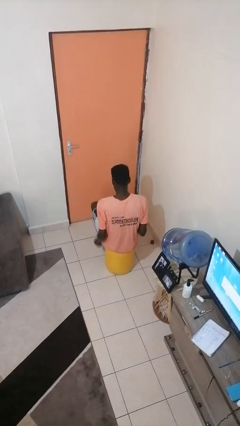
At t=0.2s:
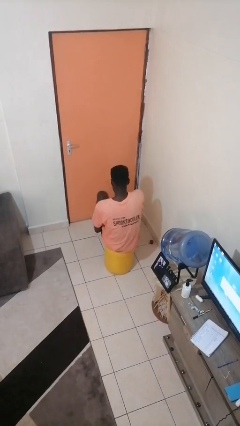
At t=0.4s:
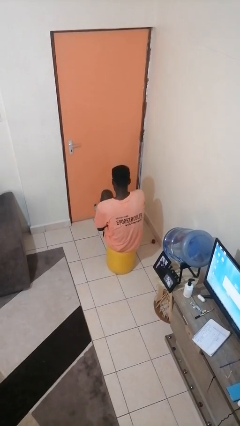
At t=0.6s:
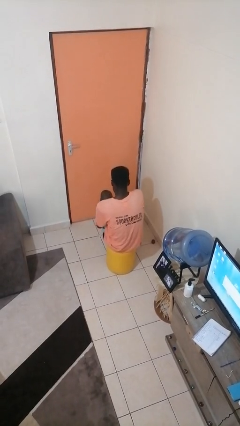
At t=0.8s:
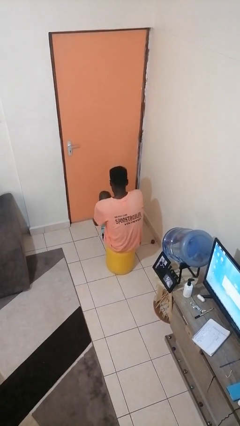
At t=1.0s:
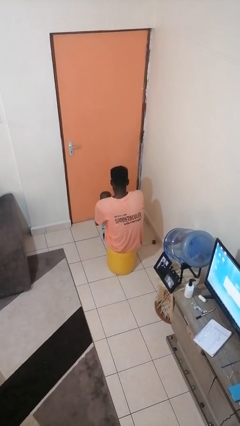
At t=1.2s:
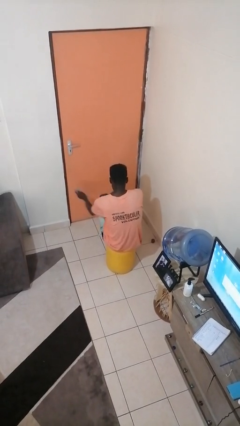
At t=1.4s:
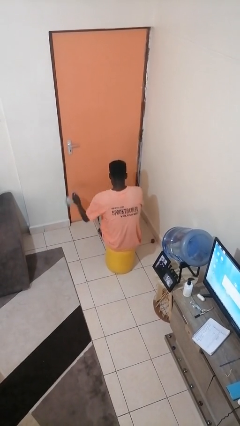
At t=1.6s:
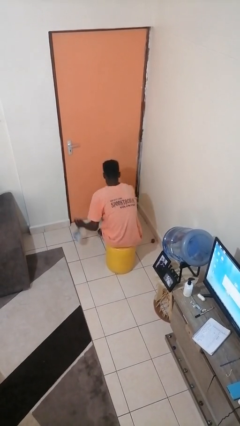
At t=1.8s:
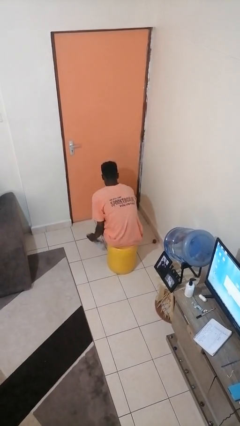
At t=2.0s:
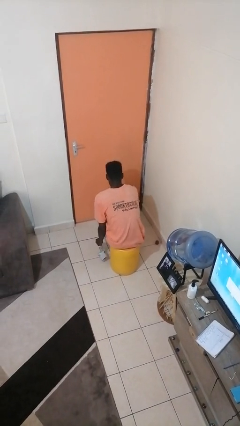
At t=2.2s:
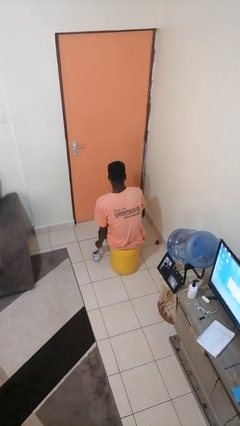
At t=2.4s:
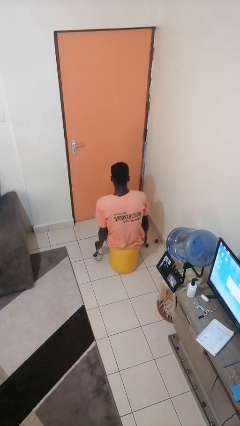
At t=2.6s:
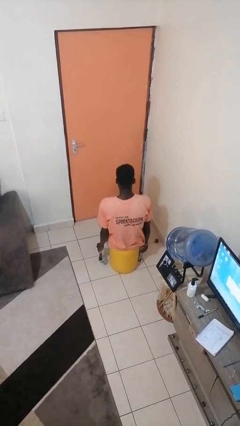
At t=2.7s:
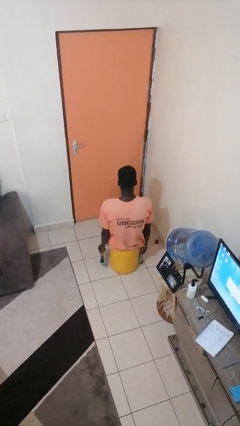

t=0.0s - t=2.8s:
person takes off socks

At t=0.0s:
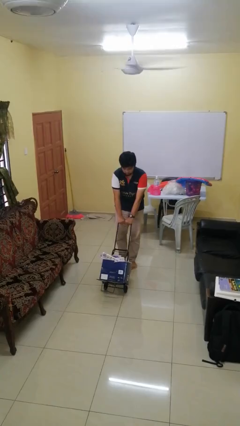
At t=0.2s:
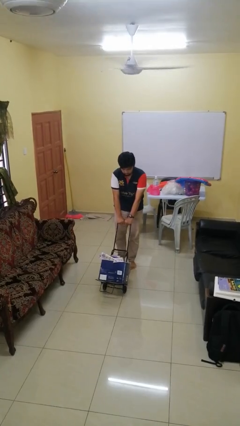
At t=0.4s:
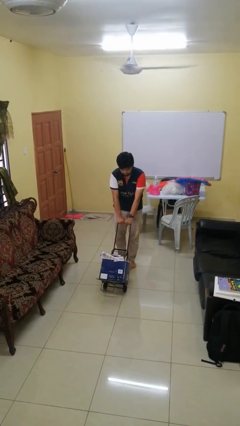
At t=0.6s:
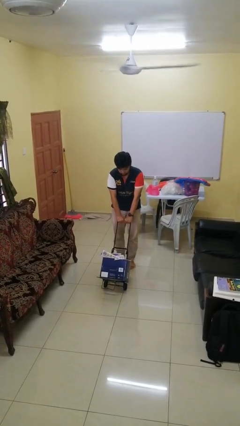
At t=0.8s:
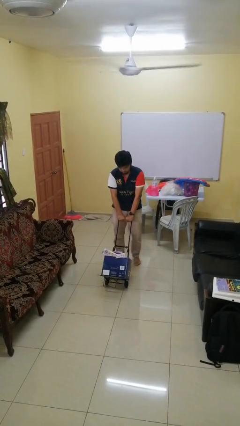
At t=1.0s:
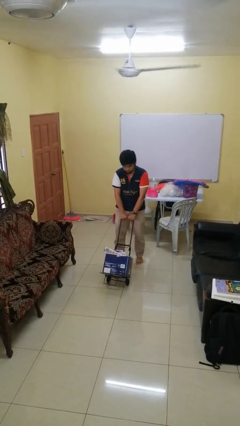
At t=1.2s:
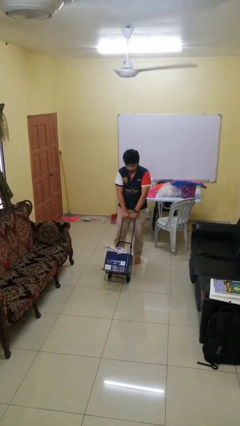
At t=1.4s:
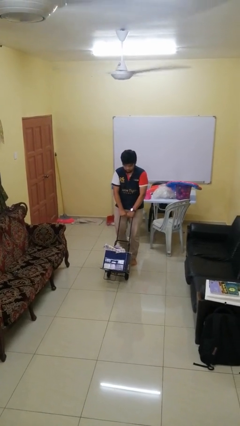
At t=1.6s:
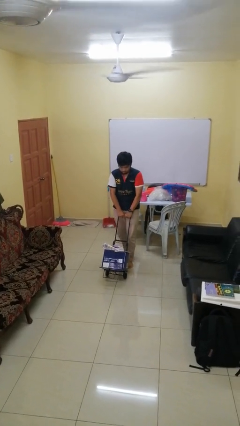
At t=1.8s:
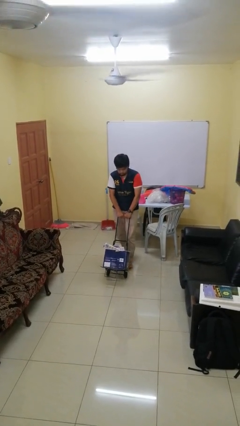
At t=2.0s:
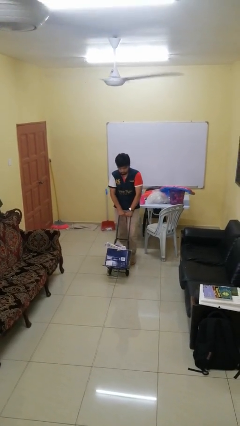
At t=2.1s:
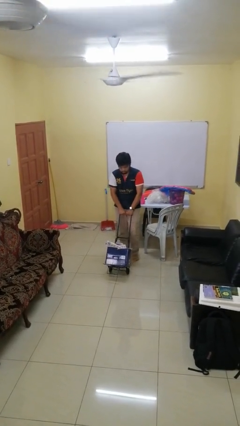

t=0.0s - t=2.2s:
person pulls wheeled cart

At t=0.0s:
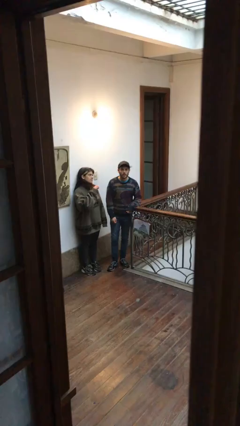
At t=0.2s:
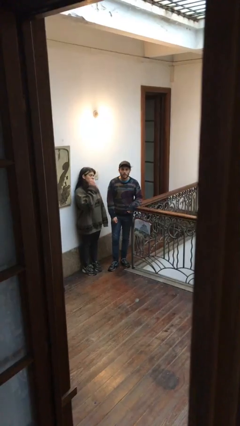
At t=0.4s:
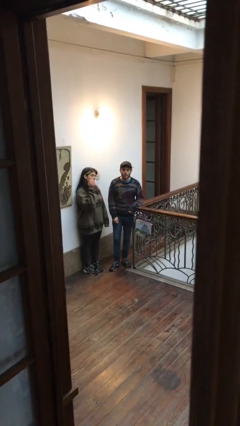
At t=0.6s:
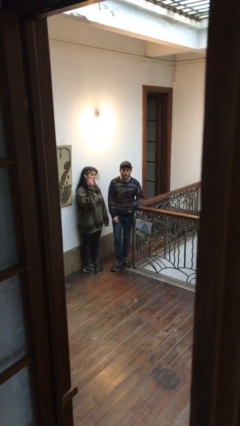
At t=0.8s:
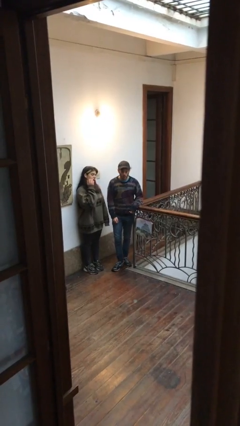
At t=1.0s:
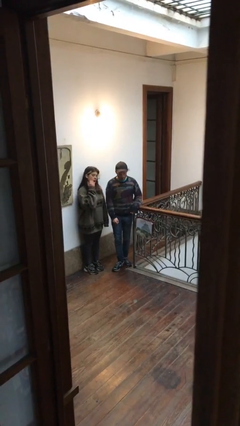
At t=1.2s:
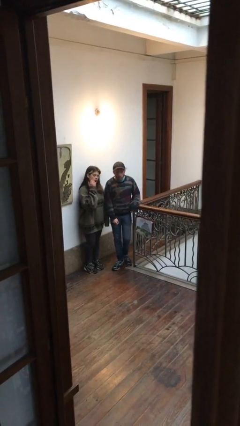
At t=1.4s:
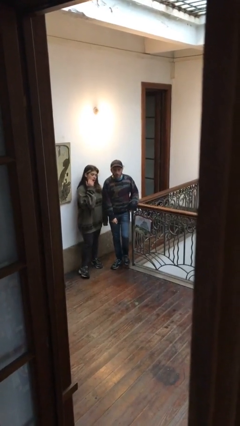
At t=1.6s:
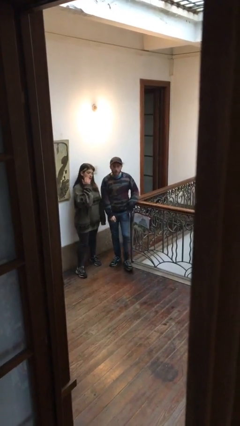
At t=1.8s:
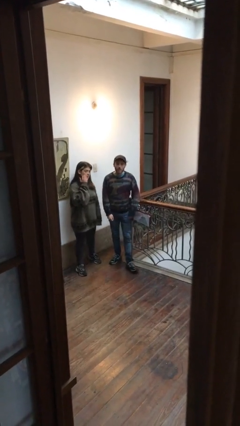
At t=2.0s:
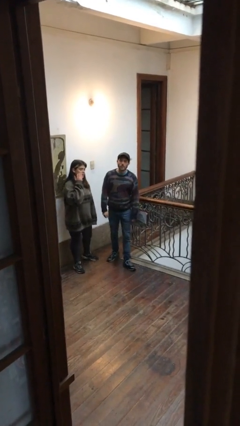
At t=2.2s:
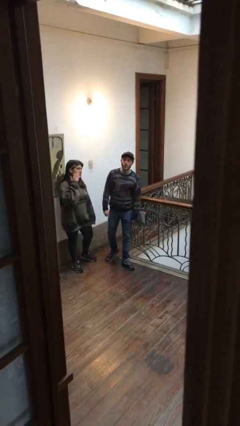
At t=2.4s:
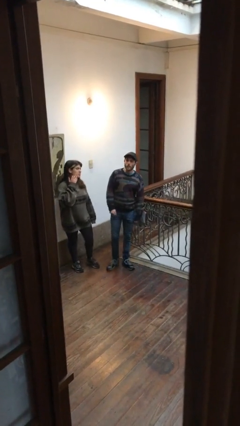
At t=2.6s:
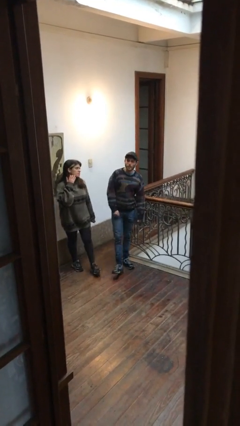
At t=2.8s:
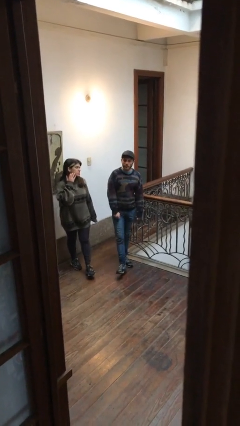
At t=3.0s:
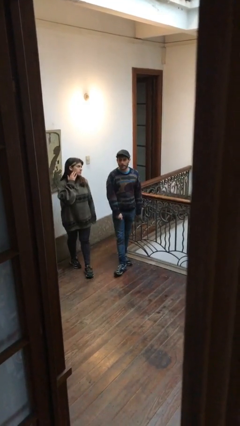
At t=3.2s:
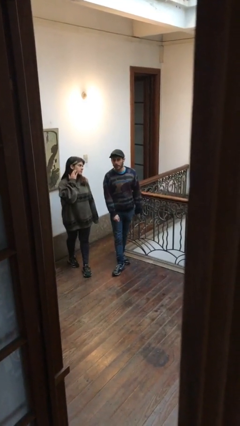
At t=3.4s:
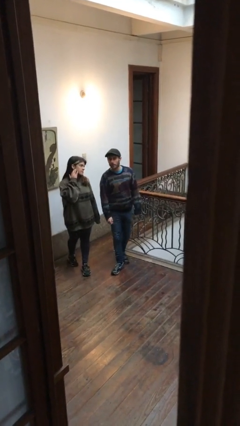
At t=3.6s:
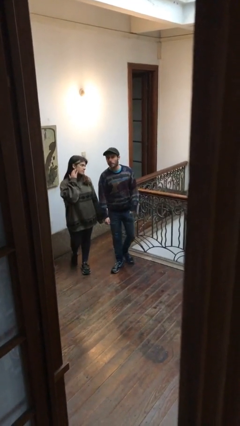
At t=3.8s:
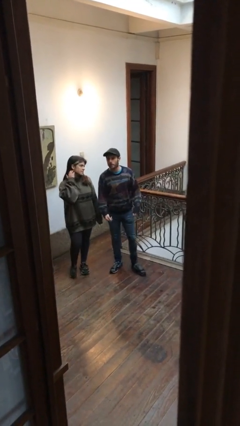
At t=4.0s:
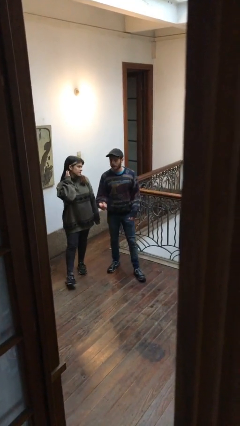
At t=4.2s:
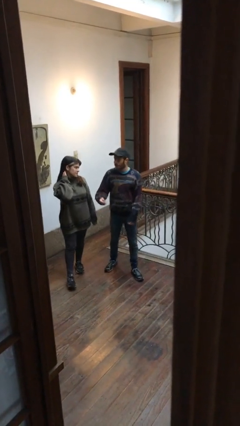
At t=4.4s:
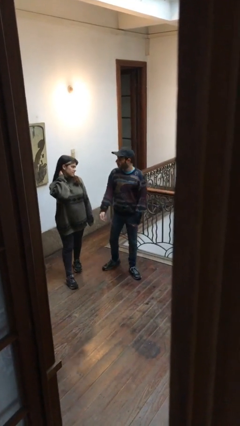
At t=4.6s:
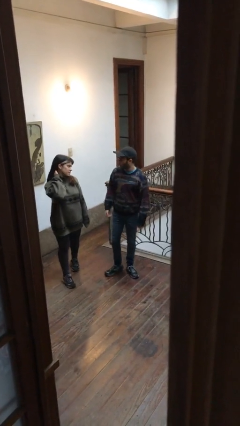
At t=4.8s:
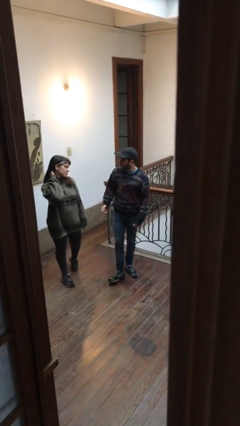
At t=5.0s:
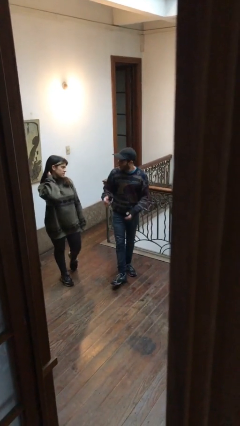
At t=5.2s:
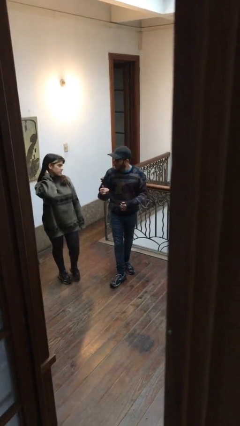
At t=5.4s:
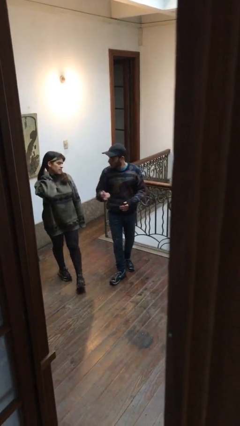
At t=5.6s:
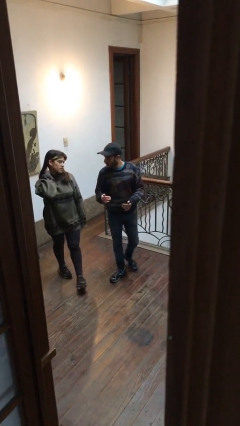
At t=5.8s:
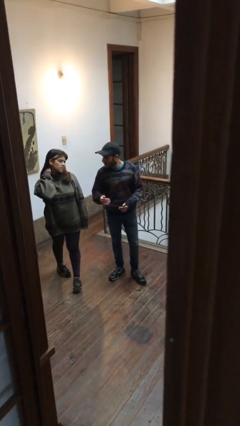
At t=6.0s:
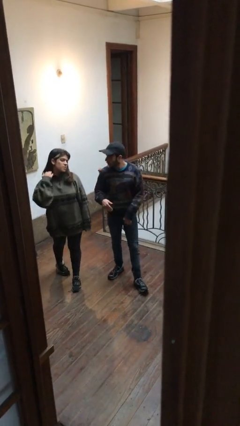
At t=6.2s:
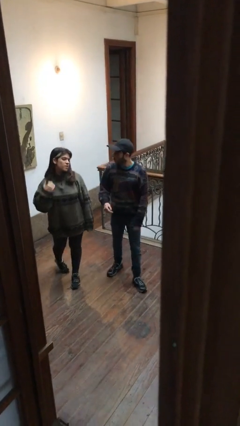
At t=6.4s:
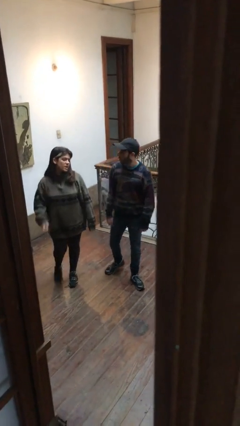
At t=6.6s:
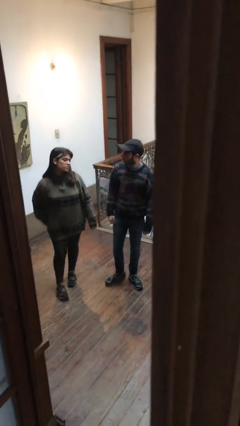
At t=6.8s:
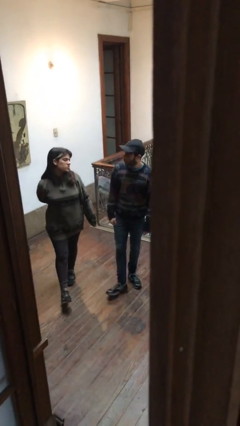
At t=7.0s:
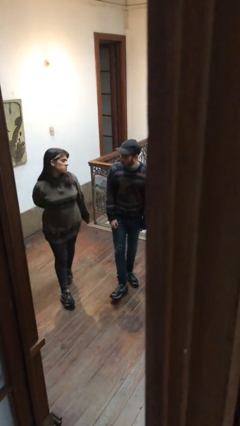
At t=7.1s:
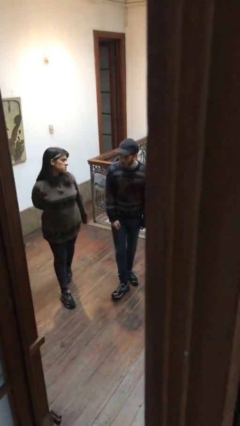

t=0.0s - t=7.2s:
person talks to person

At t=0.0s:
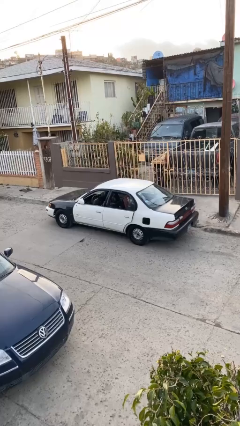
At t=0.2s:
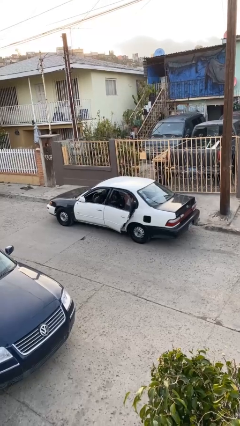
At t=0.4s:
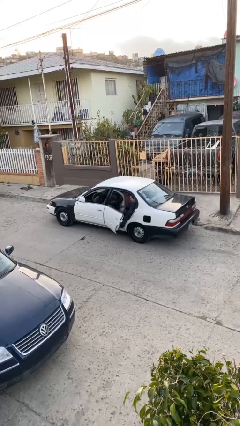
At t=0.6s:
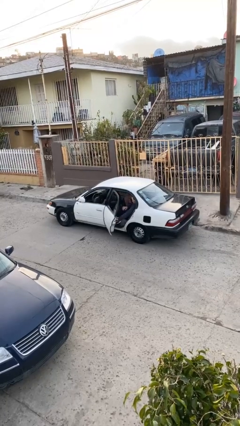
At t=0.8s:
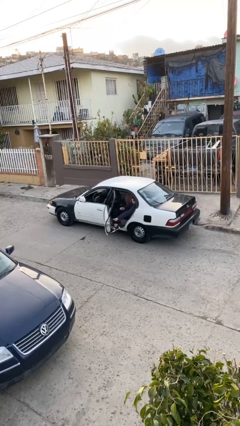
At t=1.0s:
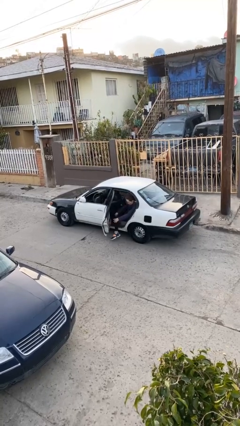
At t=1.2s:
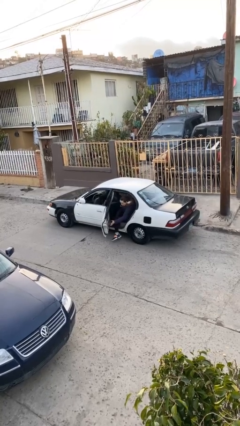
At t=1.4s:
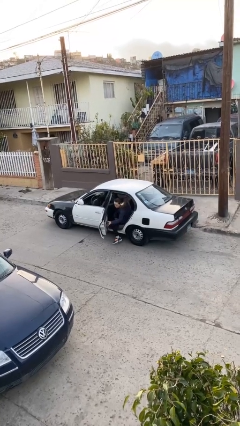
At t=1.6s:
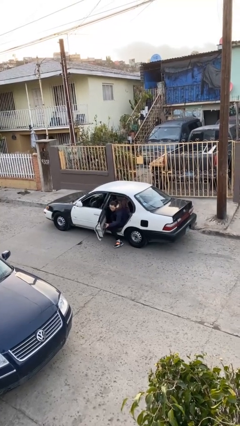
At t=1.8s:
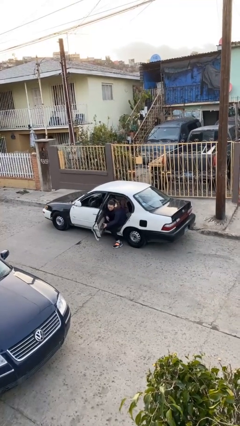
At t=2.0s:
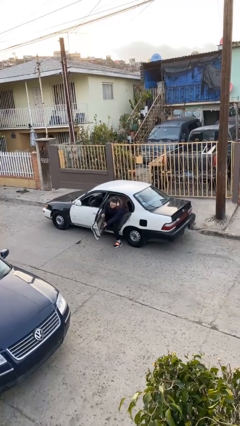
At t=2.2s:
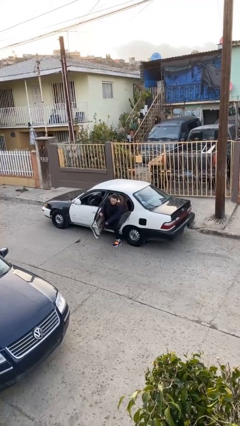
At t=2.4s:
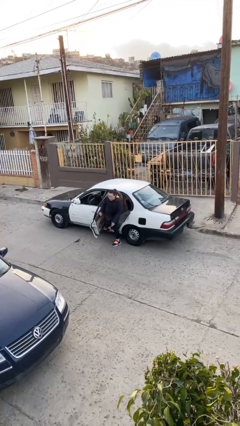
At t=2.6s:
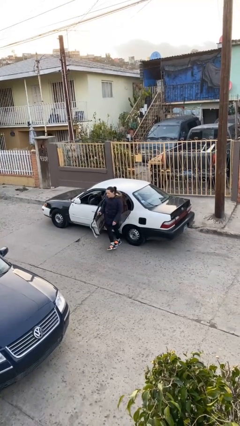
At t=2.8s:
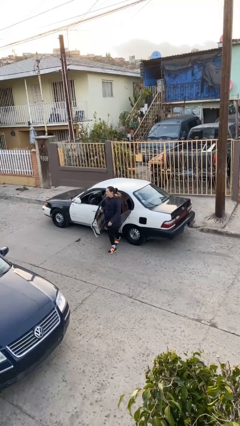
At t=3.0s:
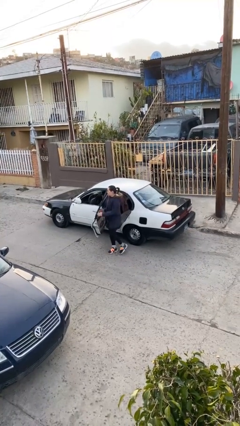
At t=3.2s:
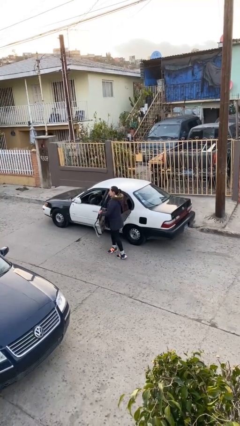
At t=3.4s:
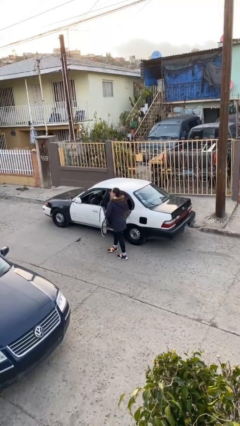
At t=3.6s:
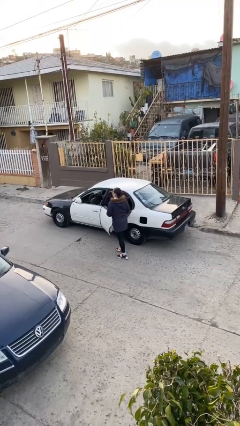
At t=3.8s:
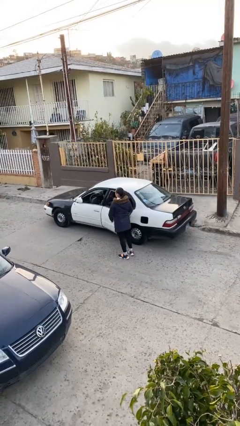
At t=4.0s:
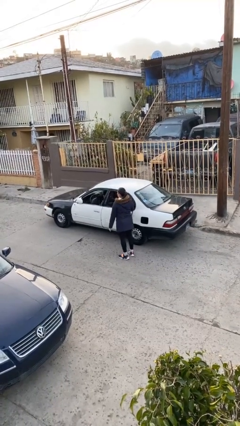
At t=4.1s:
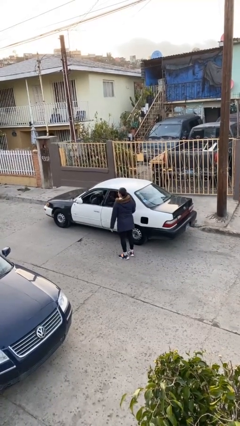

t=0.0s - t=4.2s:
car drops off person

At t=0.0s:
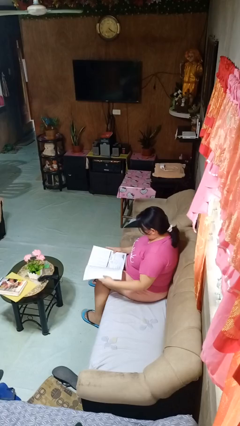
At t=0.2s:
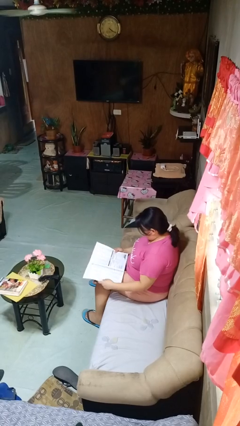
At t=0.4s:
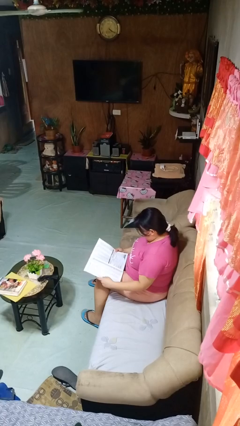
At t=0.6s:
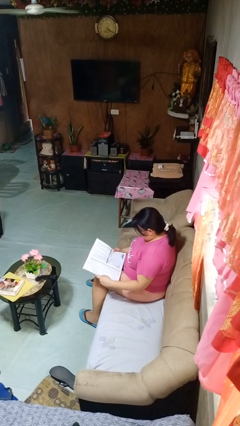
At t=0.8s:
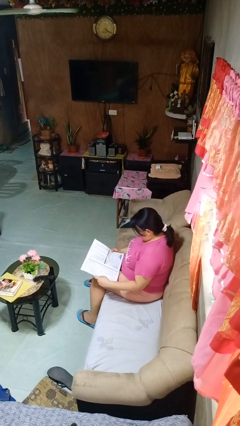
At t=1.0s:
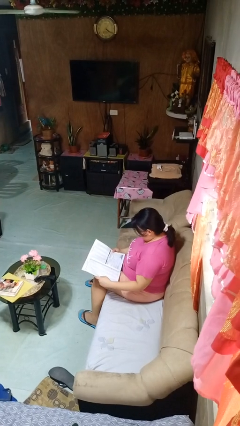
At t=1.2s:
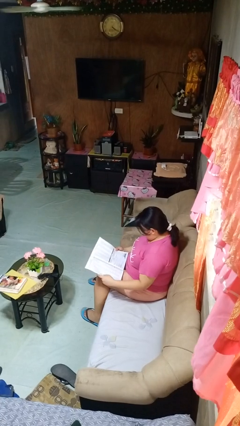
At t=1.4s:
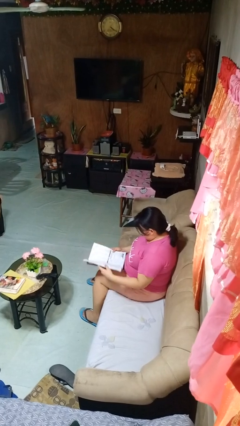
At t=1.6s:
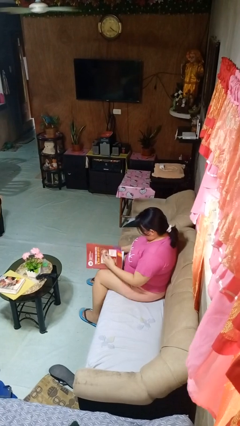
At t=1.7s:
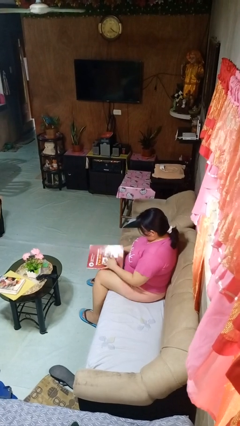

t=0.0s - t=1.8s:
person reads magazine
